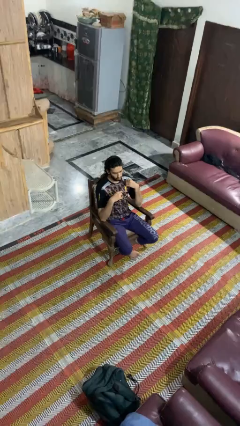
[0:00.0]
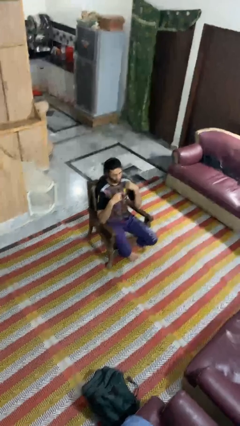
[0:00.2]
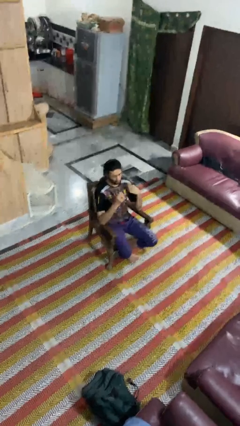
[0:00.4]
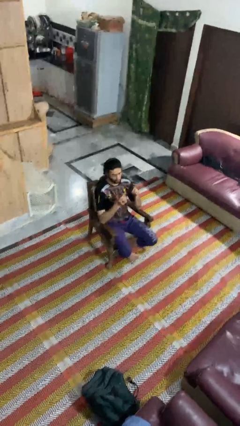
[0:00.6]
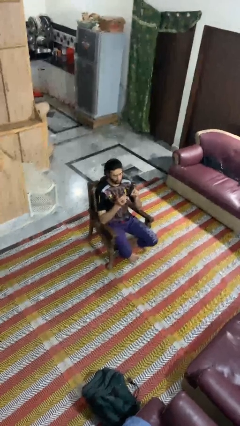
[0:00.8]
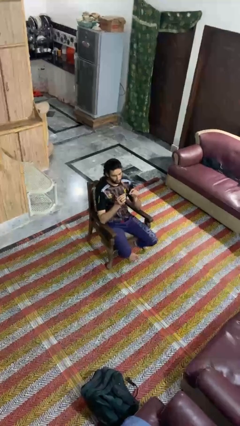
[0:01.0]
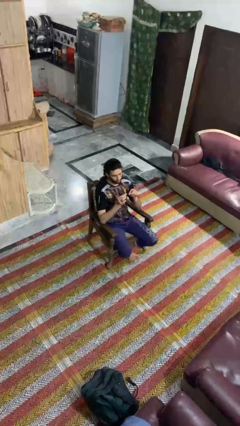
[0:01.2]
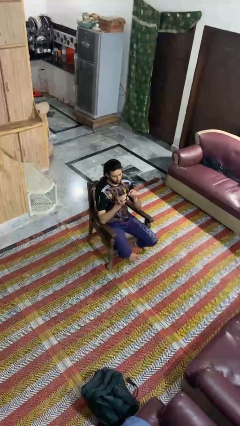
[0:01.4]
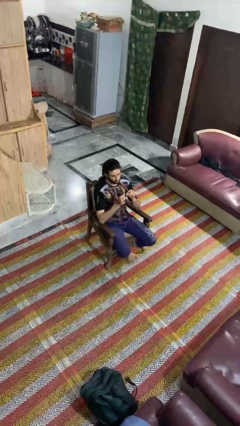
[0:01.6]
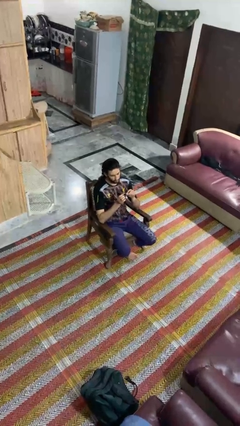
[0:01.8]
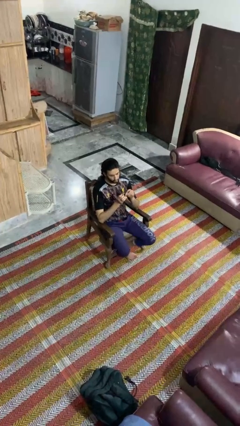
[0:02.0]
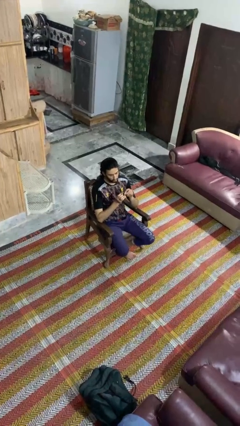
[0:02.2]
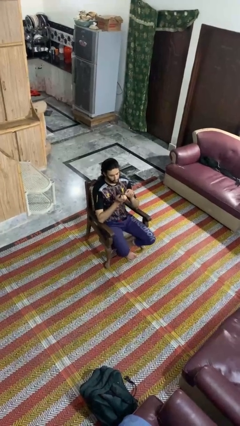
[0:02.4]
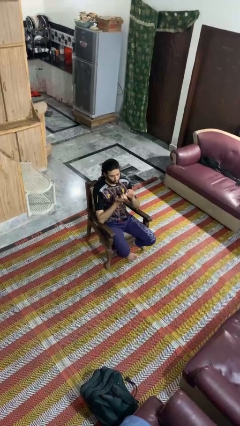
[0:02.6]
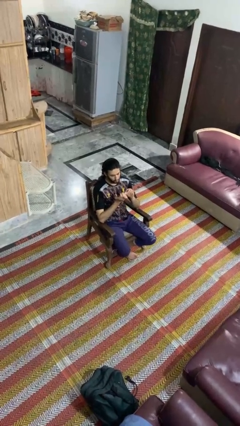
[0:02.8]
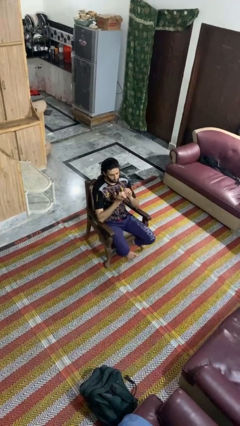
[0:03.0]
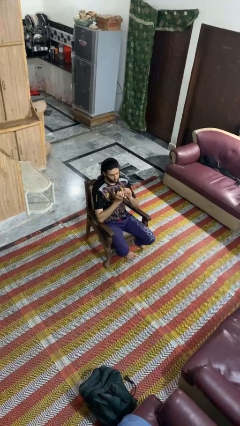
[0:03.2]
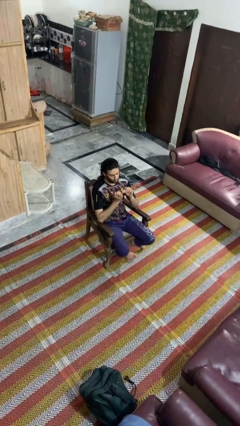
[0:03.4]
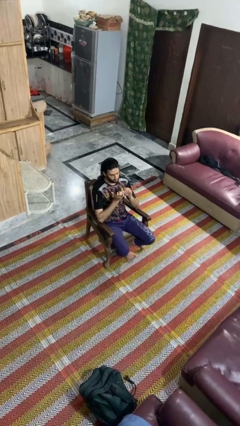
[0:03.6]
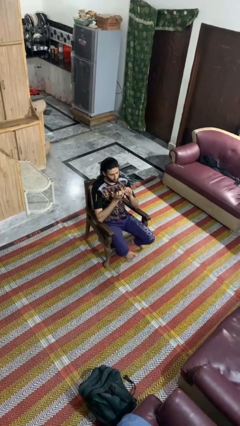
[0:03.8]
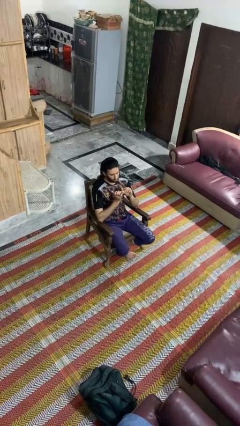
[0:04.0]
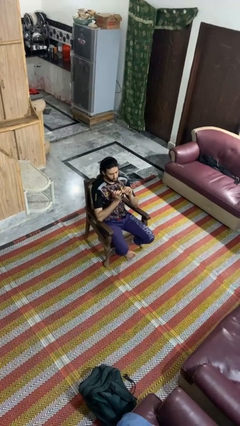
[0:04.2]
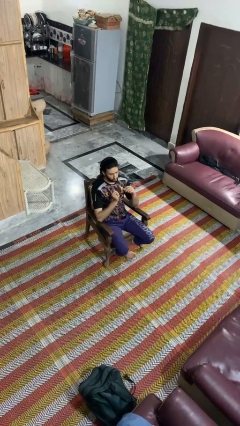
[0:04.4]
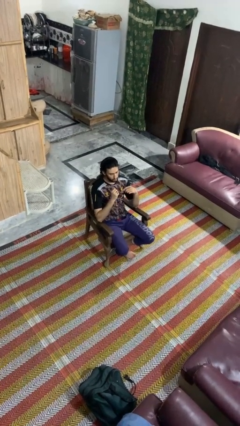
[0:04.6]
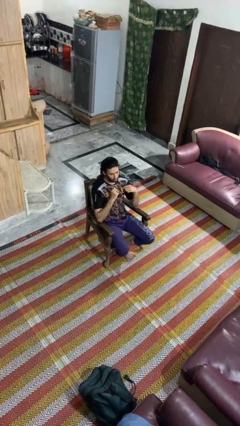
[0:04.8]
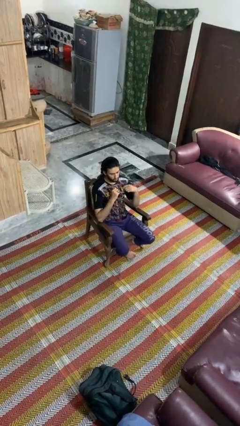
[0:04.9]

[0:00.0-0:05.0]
person files fingernails

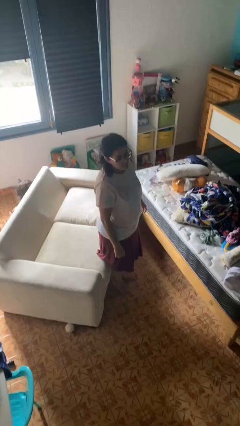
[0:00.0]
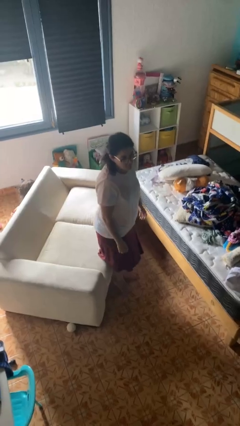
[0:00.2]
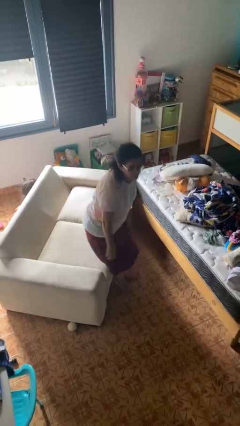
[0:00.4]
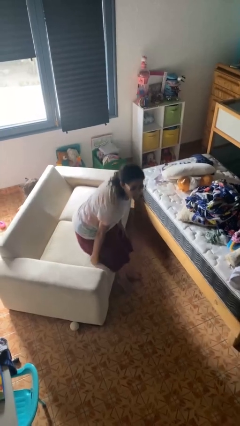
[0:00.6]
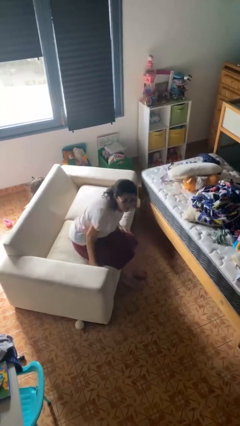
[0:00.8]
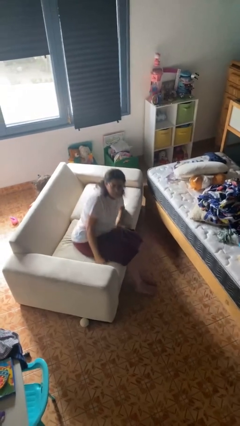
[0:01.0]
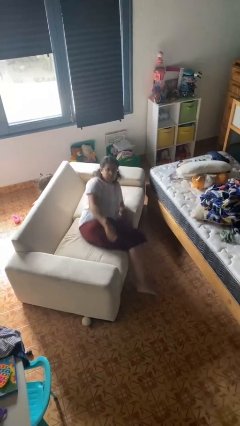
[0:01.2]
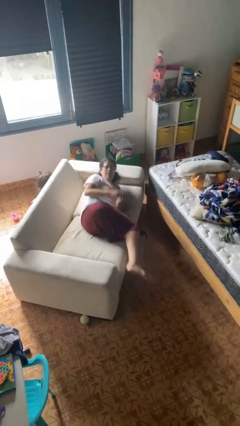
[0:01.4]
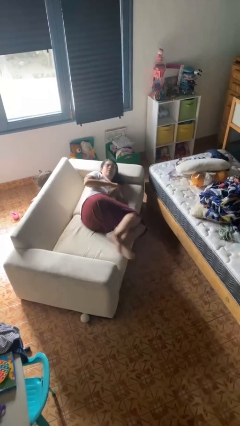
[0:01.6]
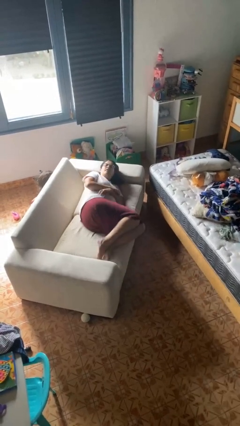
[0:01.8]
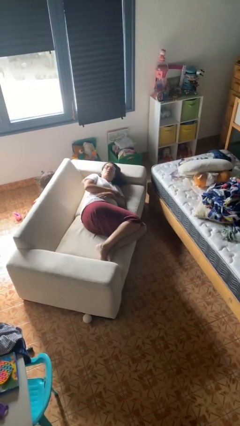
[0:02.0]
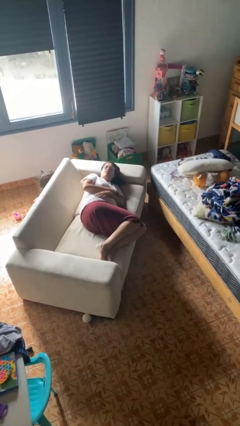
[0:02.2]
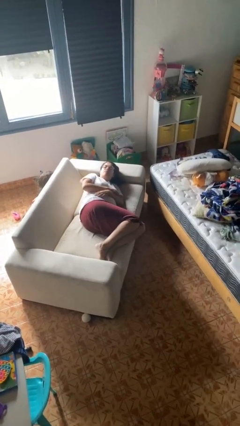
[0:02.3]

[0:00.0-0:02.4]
person lies down on couch

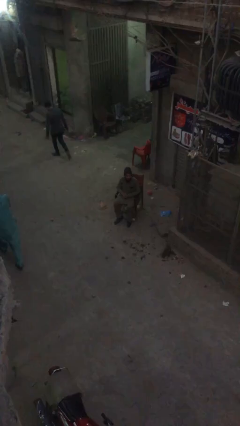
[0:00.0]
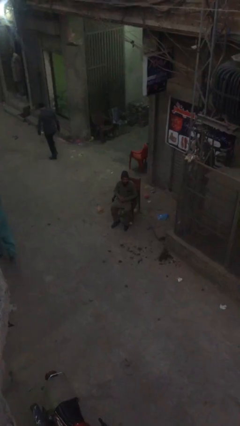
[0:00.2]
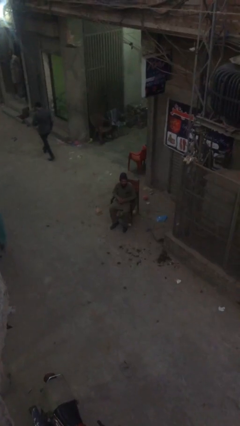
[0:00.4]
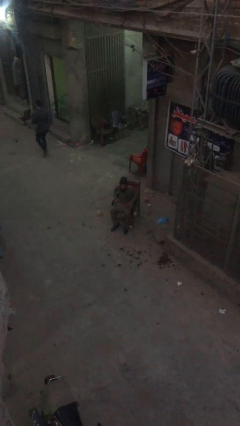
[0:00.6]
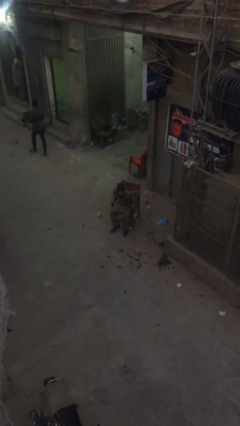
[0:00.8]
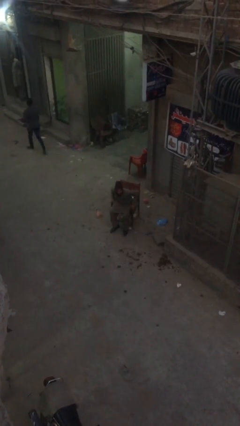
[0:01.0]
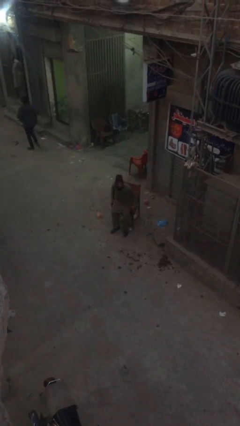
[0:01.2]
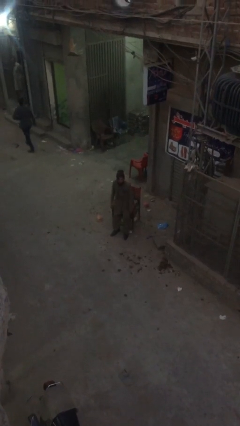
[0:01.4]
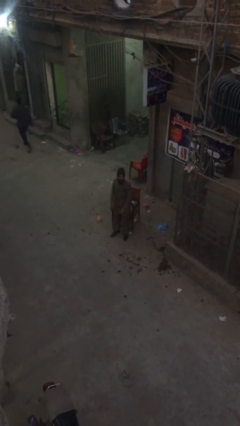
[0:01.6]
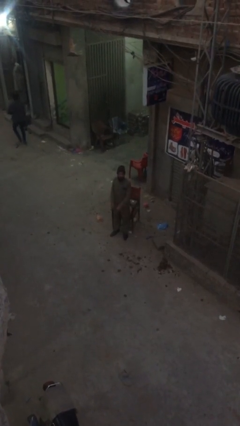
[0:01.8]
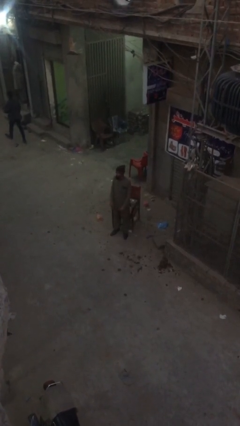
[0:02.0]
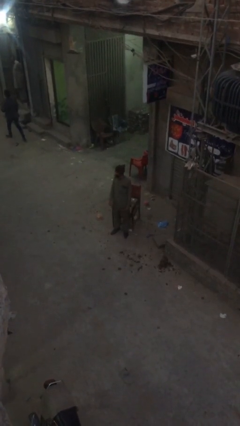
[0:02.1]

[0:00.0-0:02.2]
person stands up

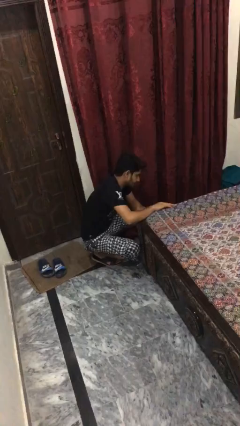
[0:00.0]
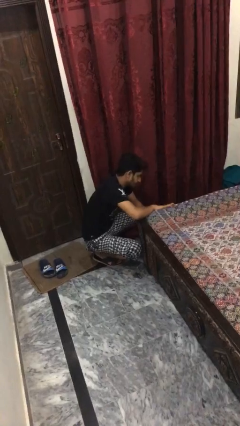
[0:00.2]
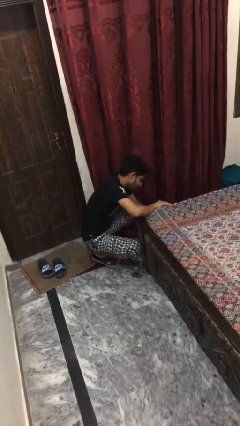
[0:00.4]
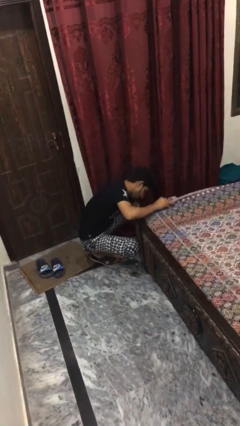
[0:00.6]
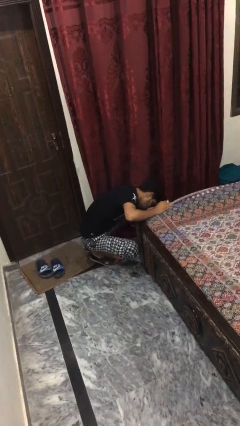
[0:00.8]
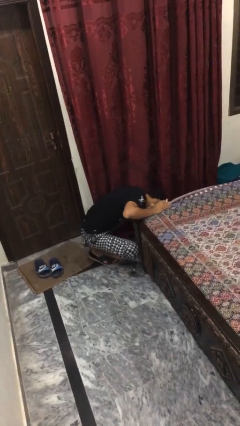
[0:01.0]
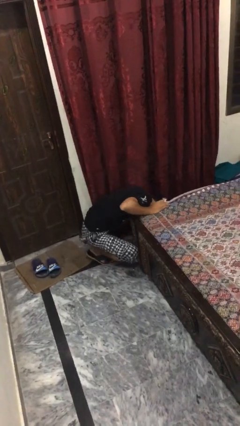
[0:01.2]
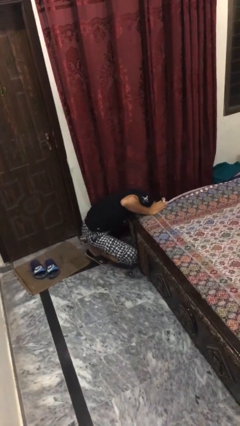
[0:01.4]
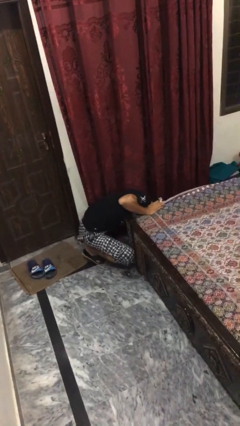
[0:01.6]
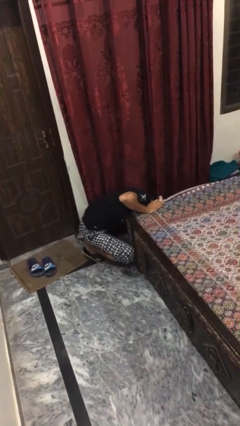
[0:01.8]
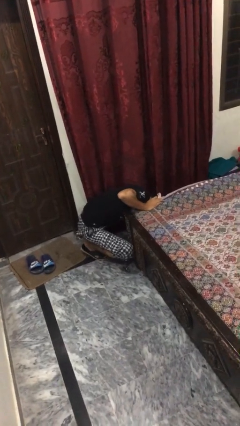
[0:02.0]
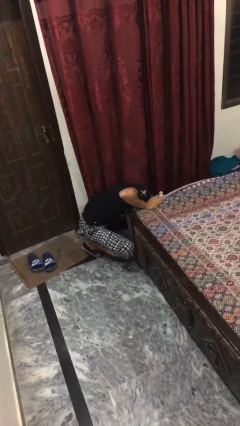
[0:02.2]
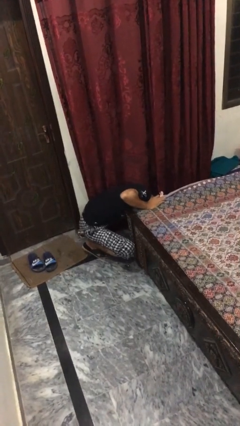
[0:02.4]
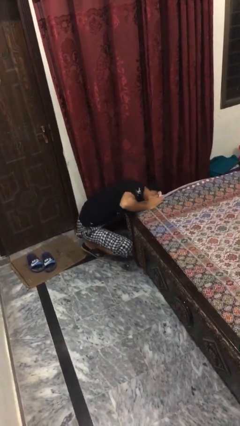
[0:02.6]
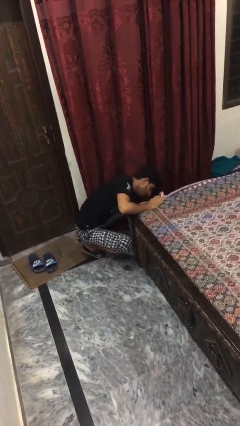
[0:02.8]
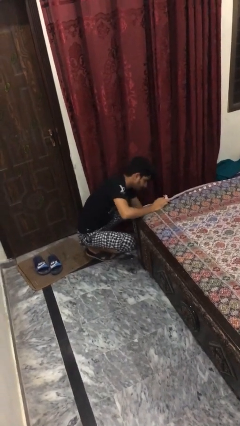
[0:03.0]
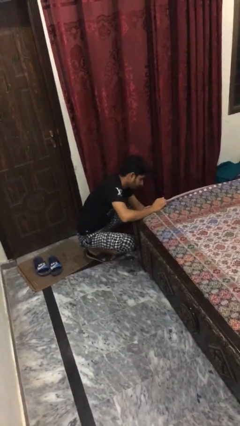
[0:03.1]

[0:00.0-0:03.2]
person searches under bed

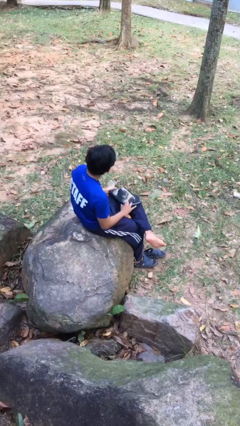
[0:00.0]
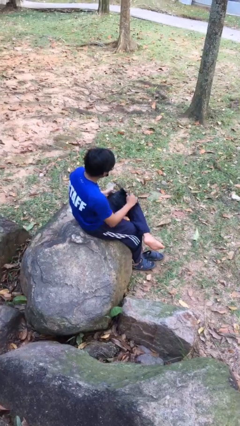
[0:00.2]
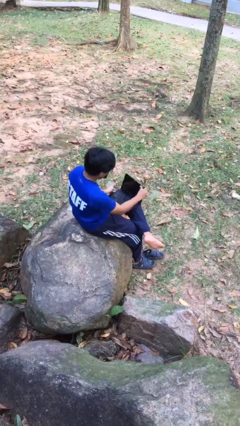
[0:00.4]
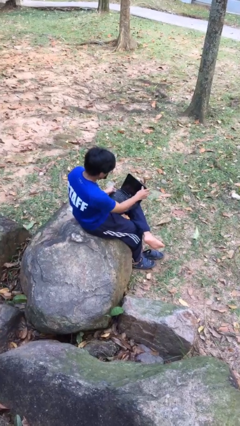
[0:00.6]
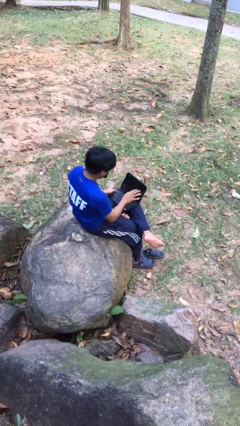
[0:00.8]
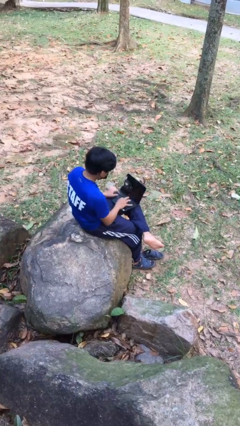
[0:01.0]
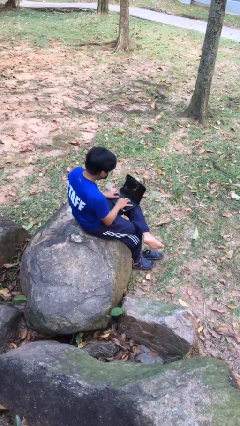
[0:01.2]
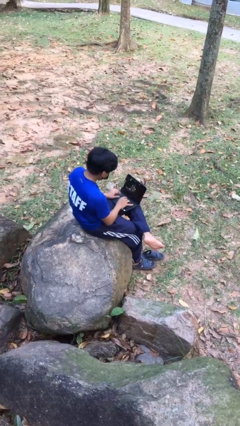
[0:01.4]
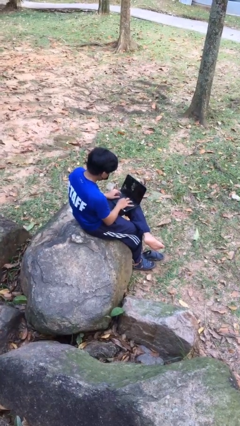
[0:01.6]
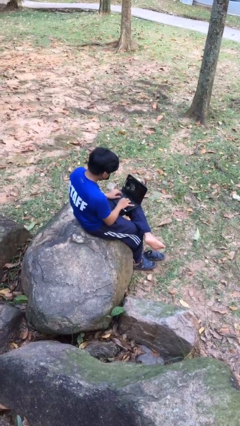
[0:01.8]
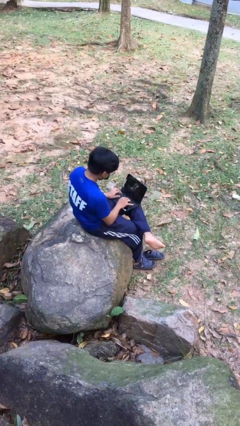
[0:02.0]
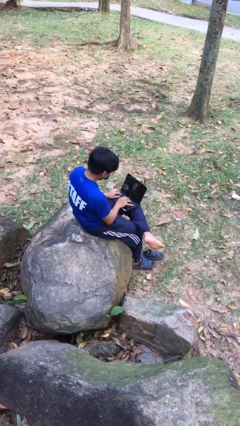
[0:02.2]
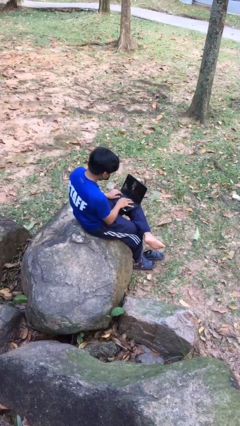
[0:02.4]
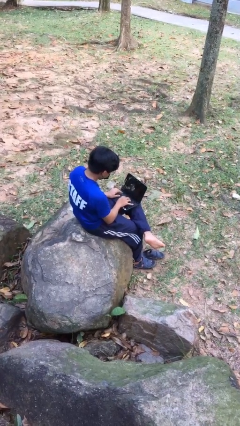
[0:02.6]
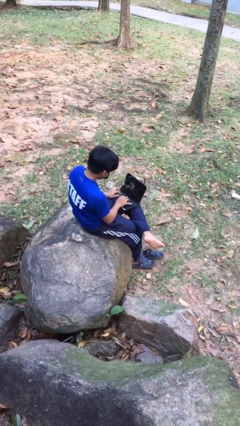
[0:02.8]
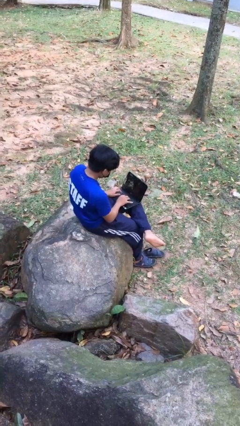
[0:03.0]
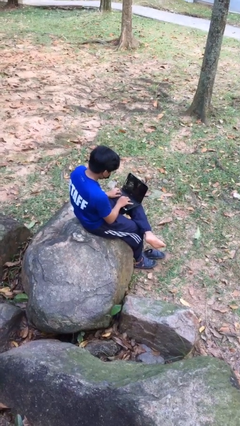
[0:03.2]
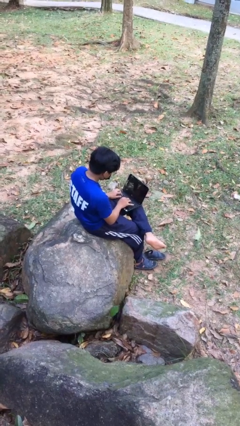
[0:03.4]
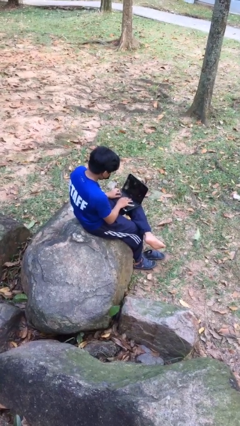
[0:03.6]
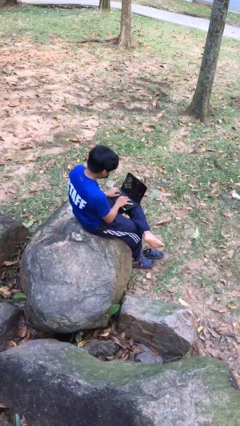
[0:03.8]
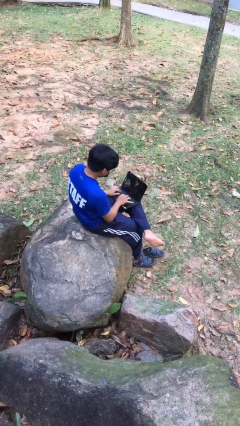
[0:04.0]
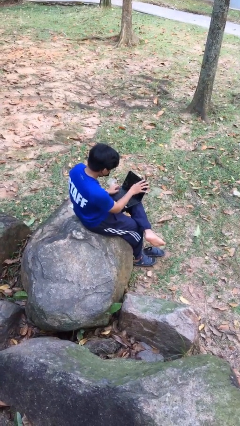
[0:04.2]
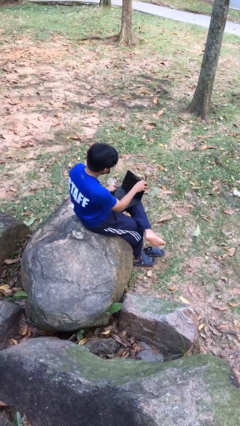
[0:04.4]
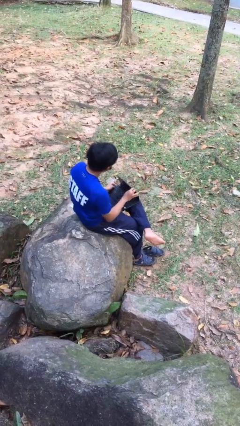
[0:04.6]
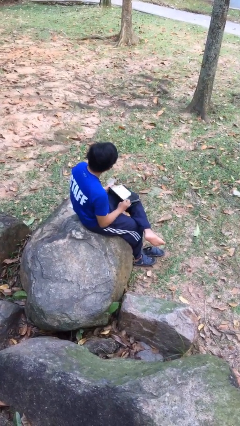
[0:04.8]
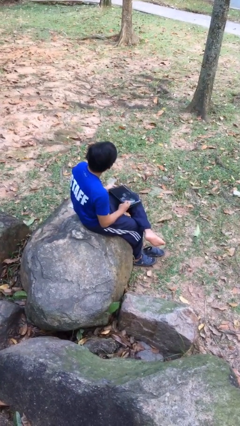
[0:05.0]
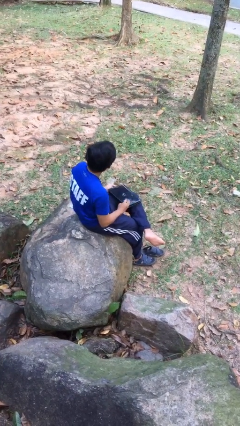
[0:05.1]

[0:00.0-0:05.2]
person interacts with laptop
